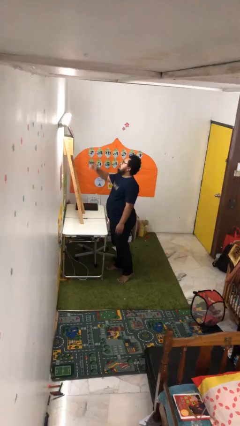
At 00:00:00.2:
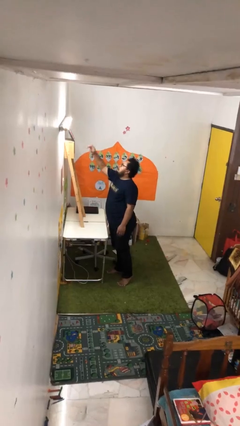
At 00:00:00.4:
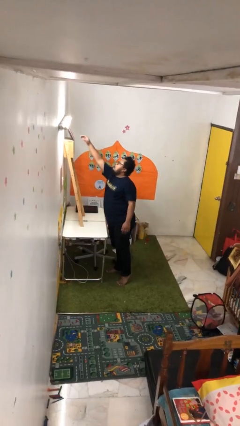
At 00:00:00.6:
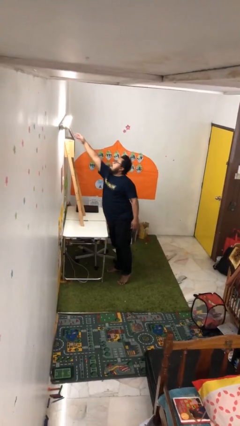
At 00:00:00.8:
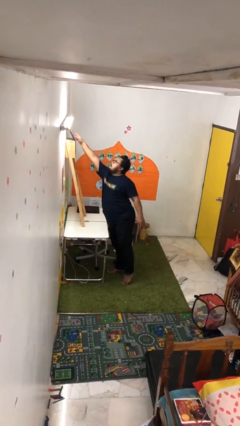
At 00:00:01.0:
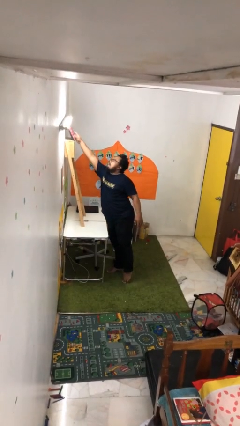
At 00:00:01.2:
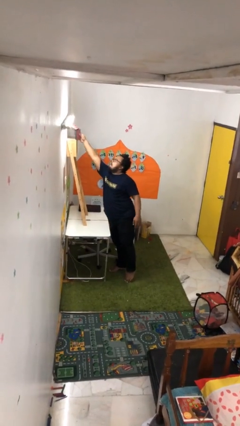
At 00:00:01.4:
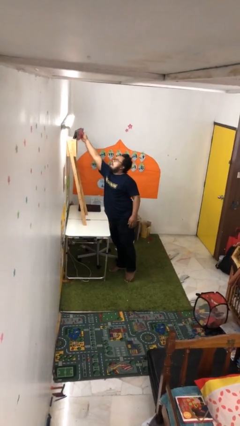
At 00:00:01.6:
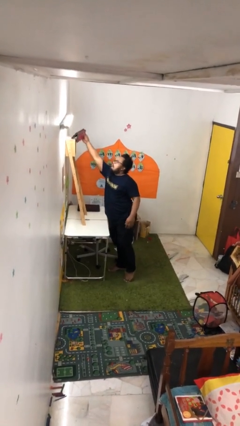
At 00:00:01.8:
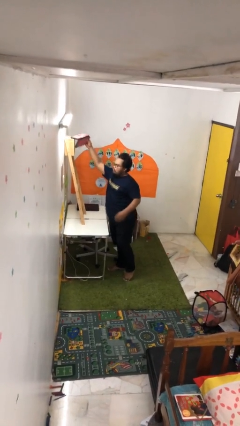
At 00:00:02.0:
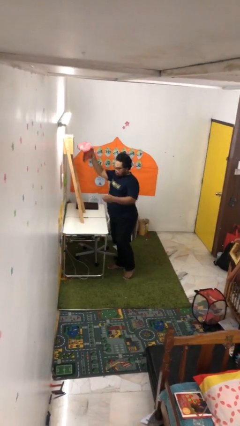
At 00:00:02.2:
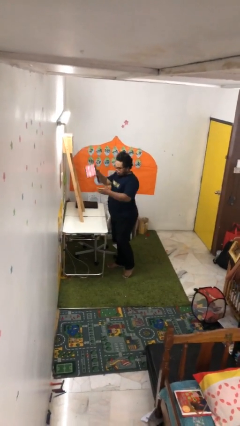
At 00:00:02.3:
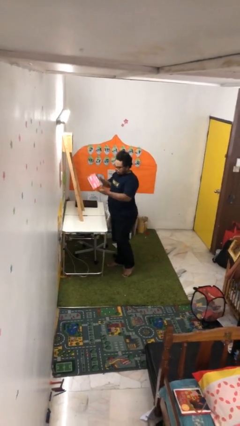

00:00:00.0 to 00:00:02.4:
person picks up object from shelf

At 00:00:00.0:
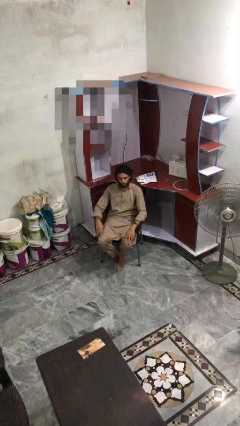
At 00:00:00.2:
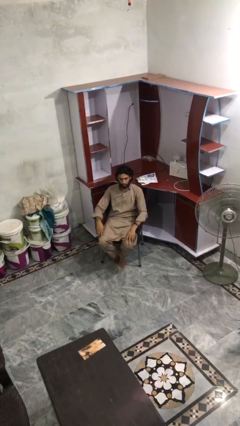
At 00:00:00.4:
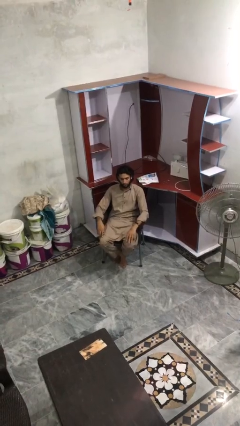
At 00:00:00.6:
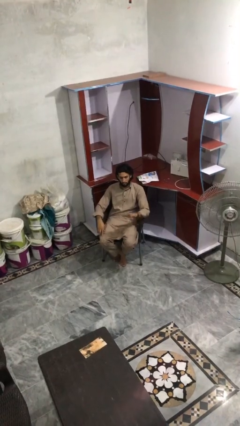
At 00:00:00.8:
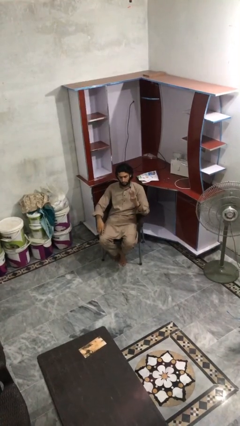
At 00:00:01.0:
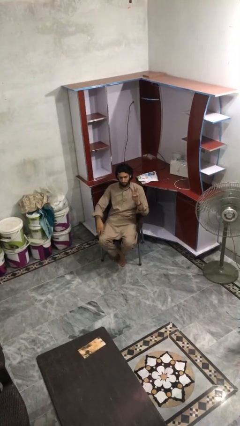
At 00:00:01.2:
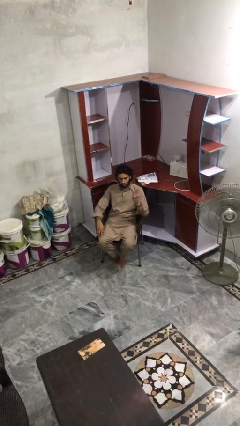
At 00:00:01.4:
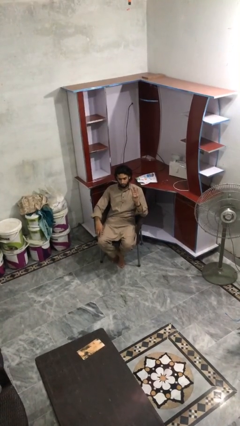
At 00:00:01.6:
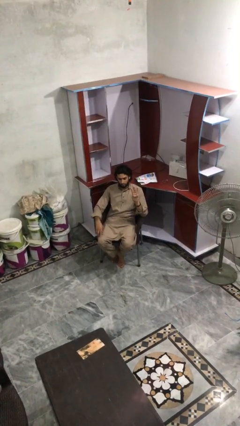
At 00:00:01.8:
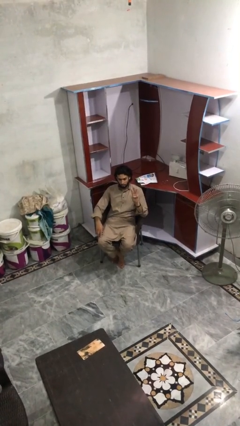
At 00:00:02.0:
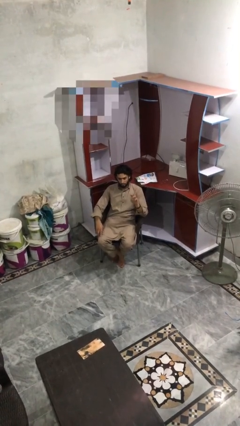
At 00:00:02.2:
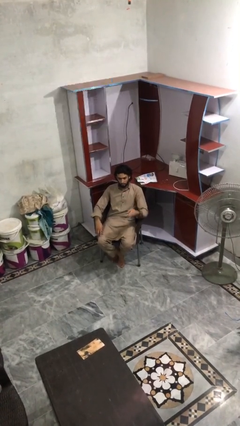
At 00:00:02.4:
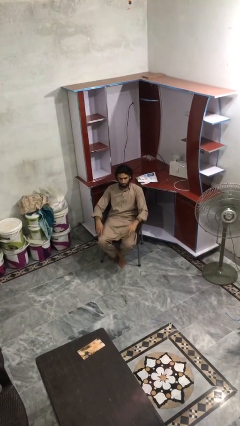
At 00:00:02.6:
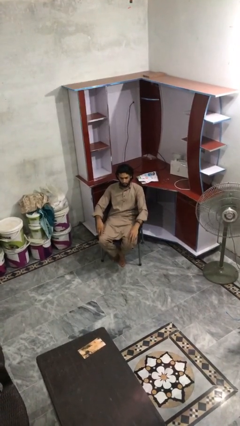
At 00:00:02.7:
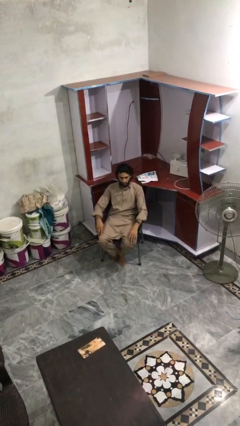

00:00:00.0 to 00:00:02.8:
person gestures number three

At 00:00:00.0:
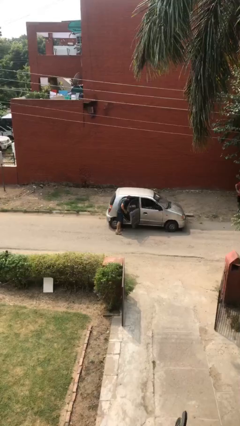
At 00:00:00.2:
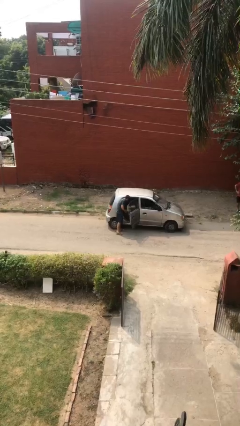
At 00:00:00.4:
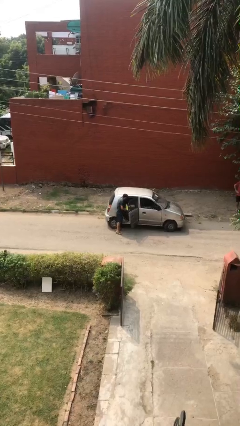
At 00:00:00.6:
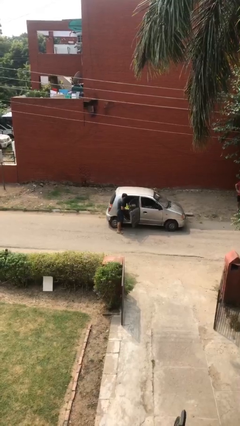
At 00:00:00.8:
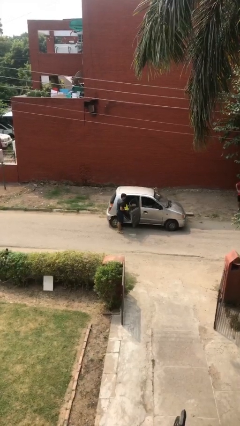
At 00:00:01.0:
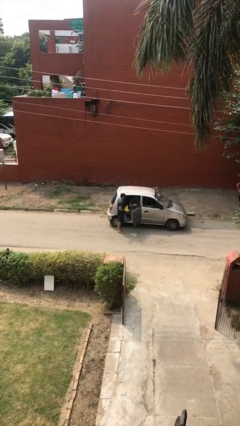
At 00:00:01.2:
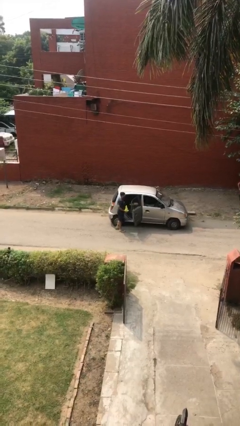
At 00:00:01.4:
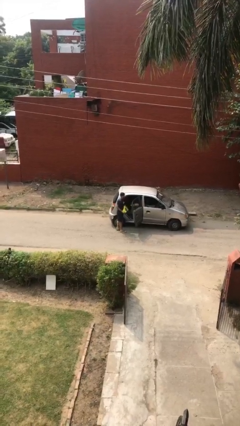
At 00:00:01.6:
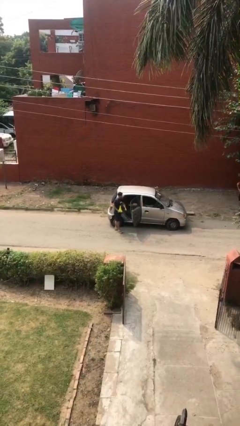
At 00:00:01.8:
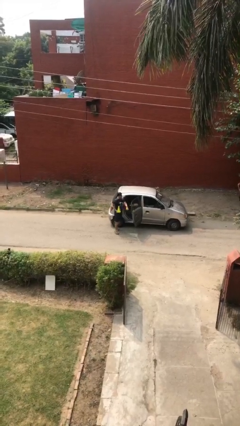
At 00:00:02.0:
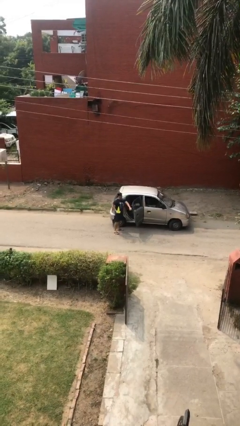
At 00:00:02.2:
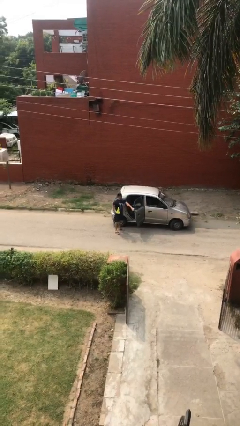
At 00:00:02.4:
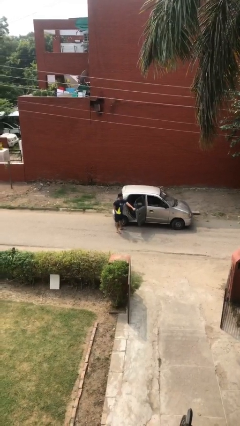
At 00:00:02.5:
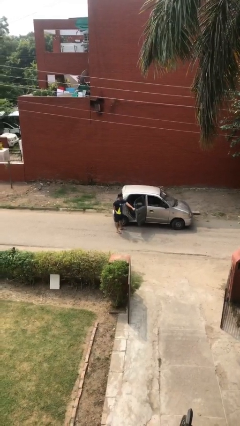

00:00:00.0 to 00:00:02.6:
person unloads car

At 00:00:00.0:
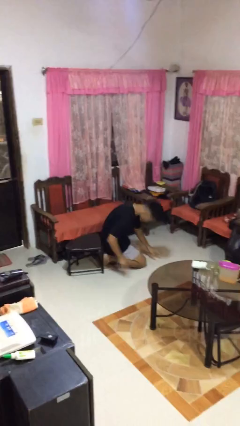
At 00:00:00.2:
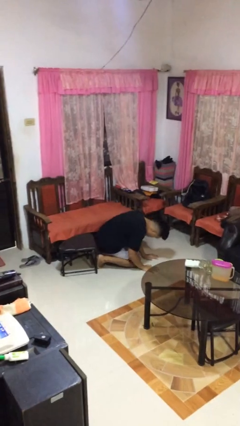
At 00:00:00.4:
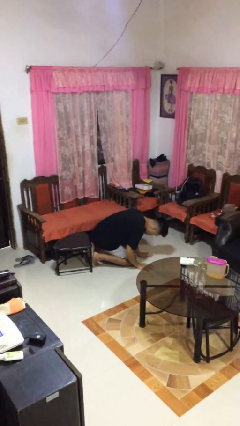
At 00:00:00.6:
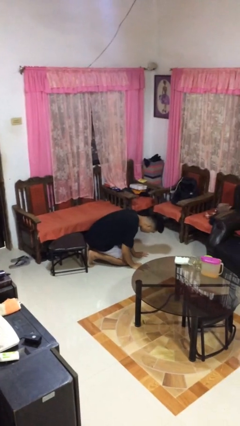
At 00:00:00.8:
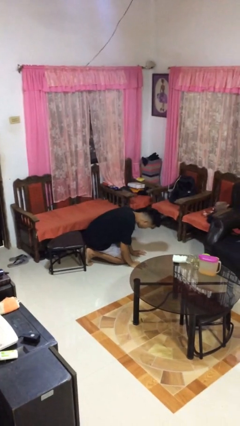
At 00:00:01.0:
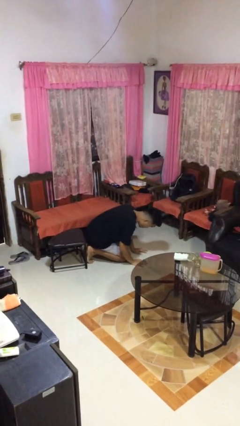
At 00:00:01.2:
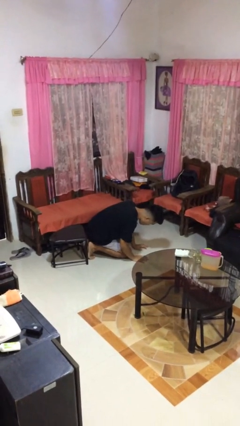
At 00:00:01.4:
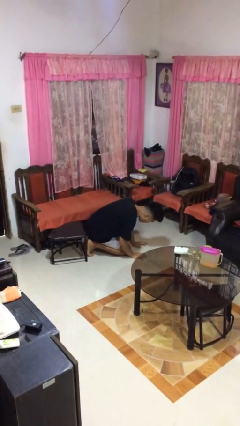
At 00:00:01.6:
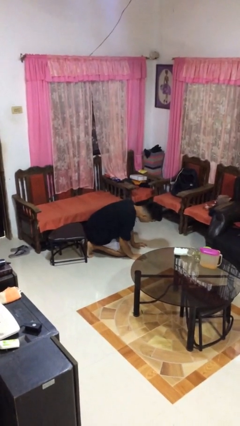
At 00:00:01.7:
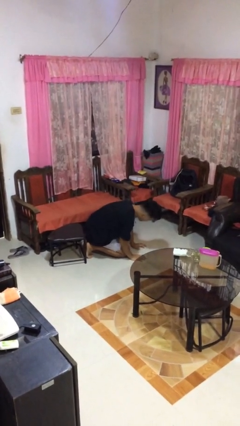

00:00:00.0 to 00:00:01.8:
person falls from chair

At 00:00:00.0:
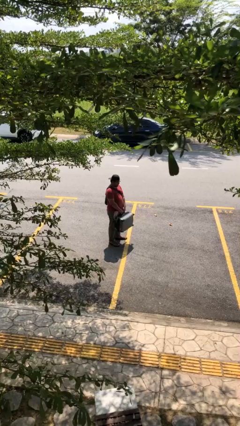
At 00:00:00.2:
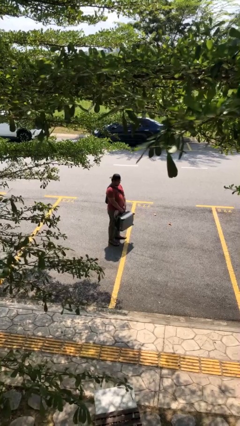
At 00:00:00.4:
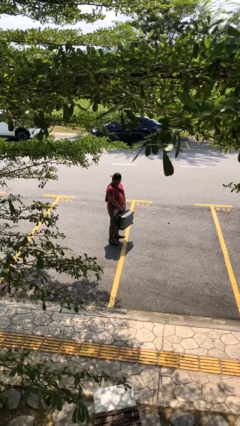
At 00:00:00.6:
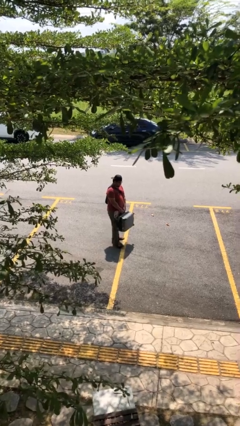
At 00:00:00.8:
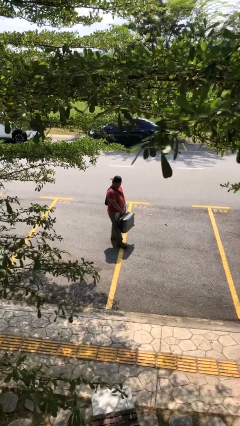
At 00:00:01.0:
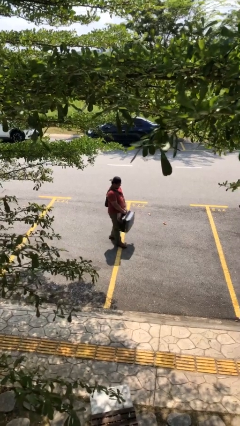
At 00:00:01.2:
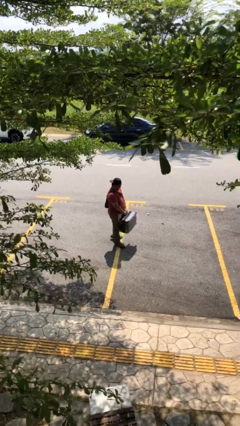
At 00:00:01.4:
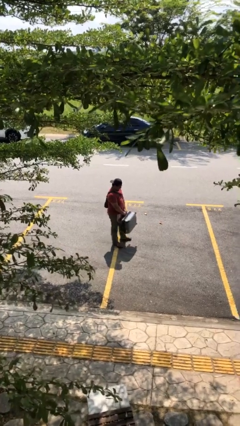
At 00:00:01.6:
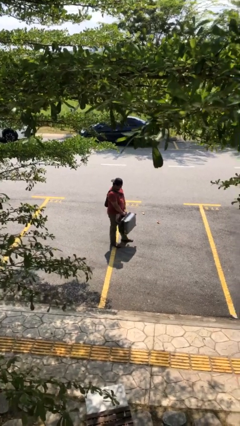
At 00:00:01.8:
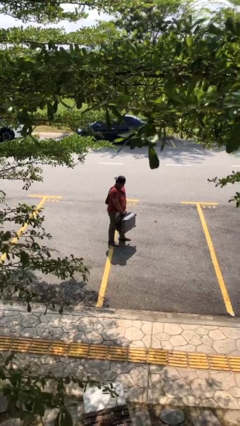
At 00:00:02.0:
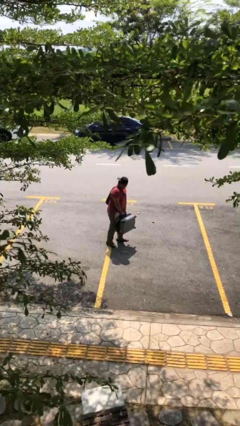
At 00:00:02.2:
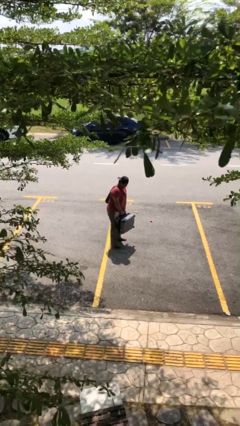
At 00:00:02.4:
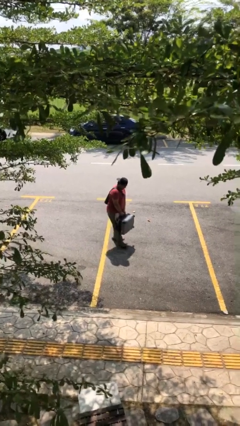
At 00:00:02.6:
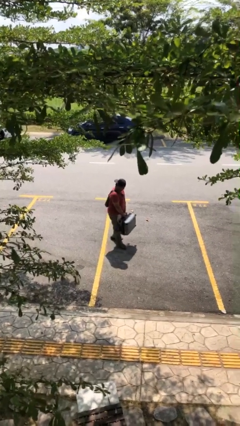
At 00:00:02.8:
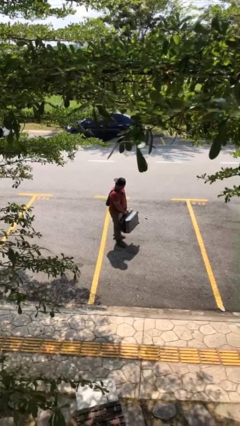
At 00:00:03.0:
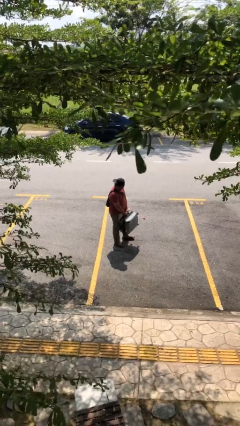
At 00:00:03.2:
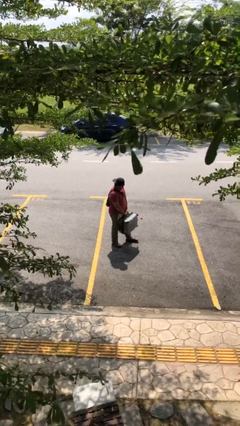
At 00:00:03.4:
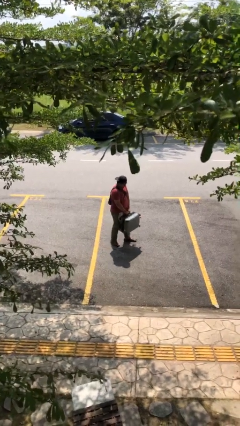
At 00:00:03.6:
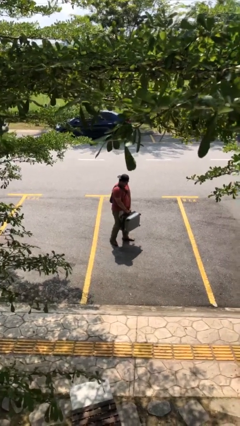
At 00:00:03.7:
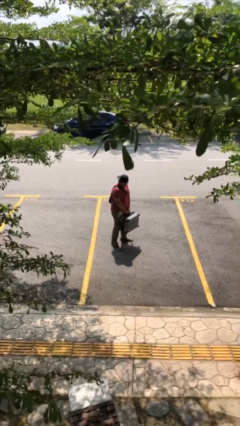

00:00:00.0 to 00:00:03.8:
person carries heavy object

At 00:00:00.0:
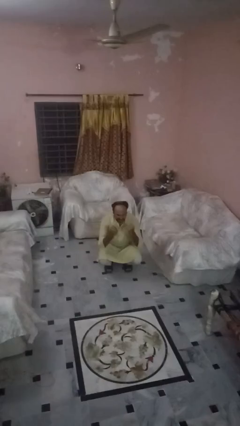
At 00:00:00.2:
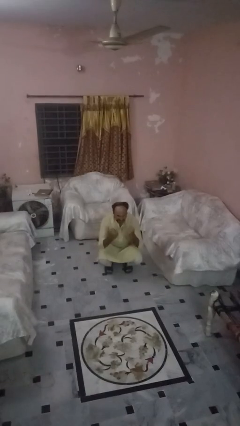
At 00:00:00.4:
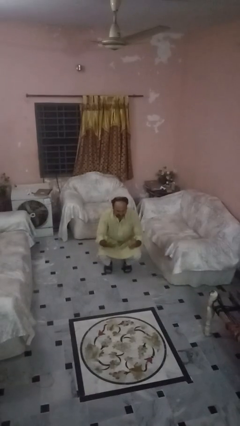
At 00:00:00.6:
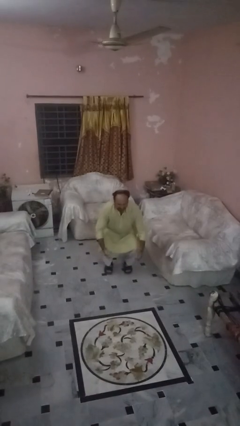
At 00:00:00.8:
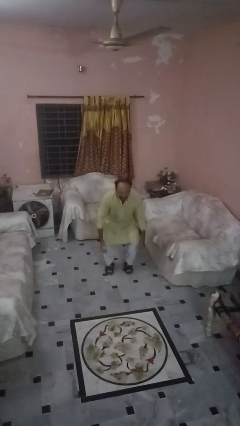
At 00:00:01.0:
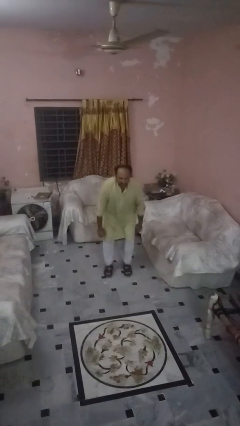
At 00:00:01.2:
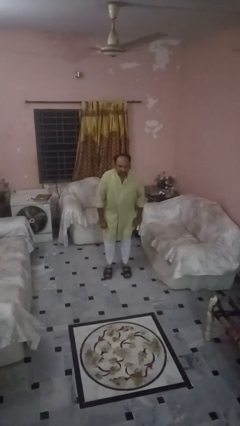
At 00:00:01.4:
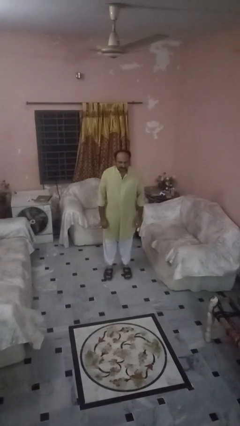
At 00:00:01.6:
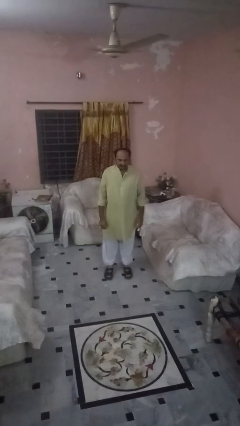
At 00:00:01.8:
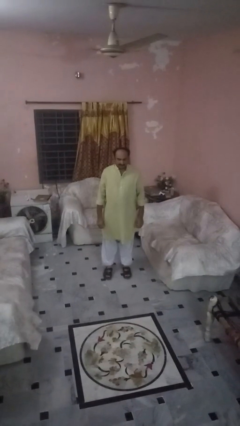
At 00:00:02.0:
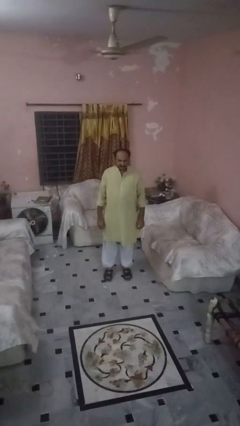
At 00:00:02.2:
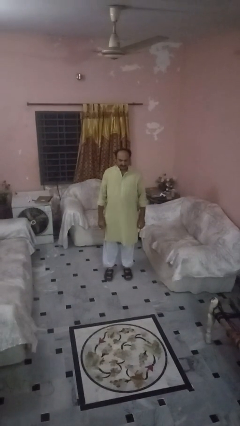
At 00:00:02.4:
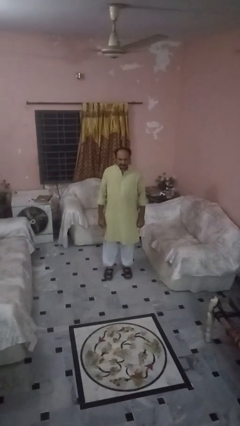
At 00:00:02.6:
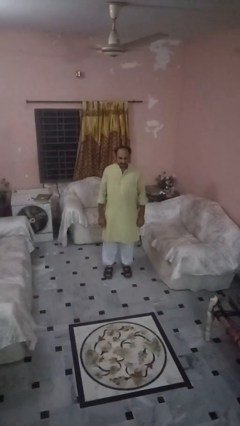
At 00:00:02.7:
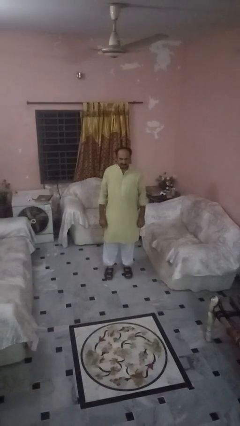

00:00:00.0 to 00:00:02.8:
person stands up

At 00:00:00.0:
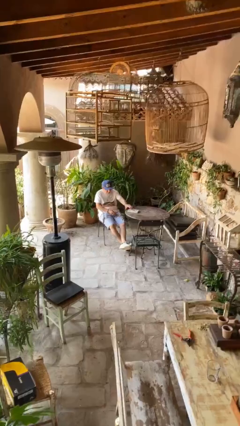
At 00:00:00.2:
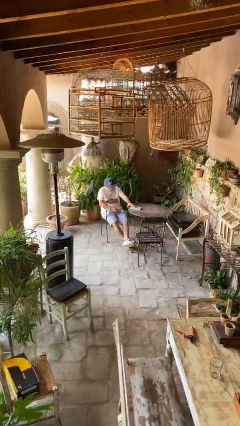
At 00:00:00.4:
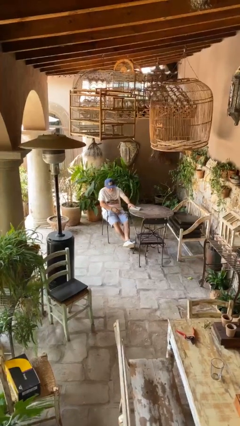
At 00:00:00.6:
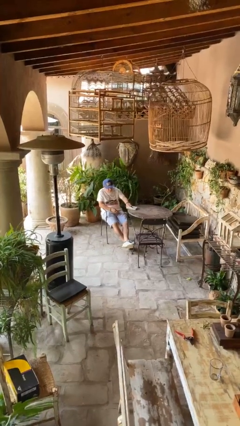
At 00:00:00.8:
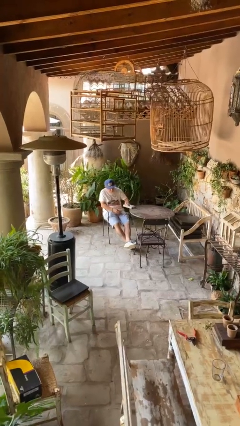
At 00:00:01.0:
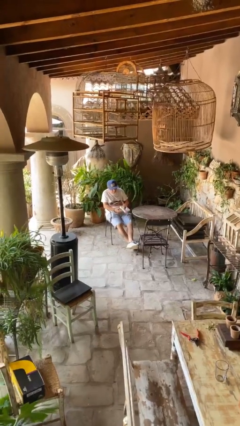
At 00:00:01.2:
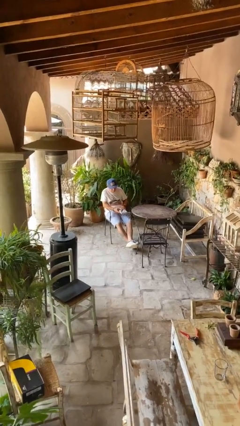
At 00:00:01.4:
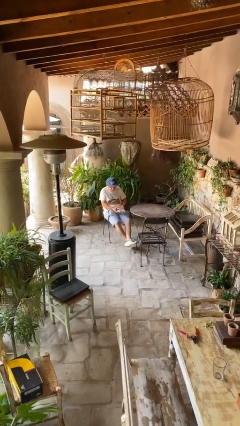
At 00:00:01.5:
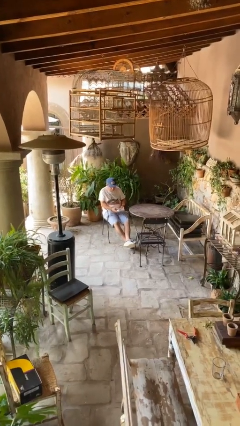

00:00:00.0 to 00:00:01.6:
person picks up object from table
